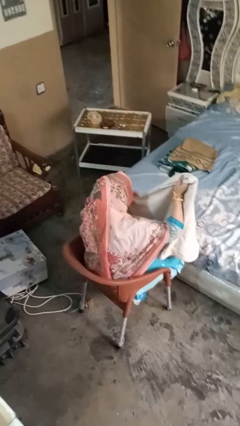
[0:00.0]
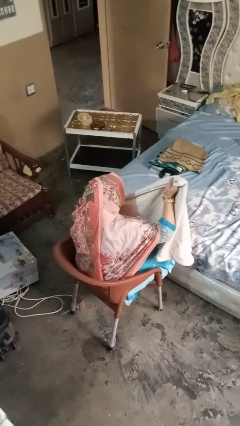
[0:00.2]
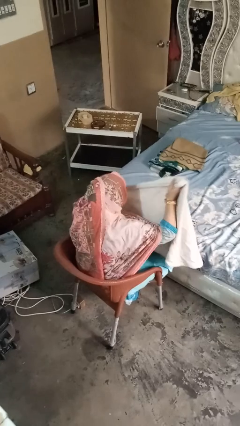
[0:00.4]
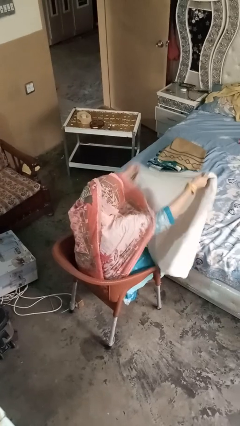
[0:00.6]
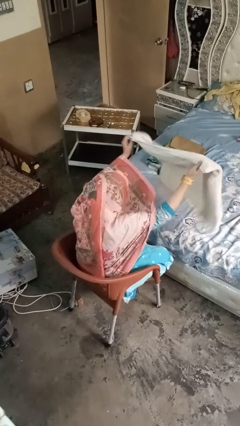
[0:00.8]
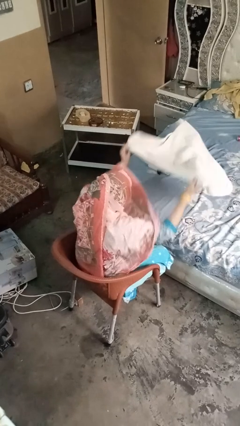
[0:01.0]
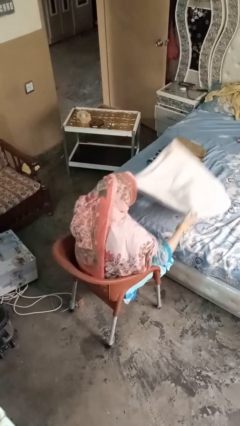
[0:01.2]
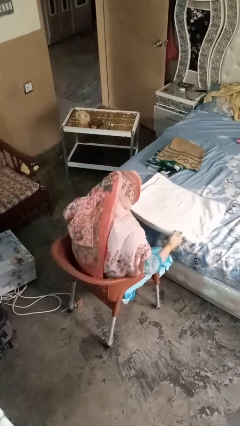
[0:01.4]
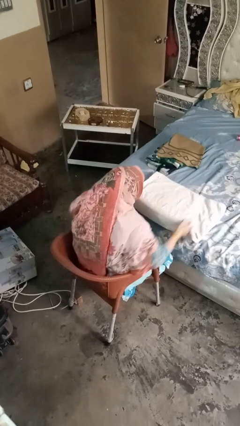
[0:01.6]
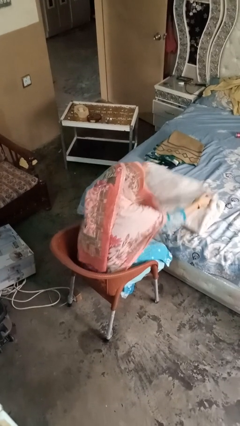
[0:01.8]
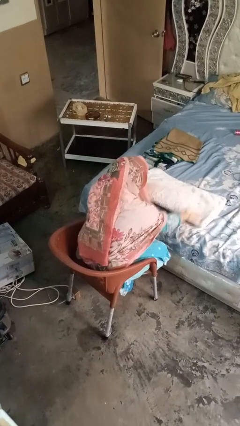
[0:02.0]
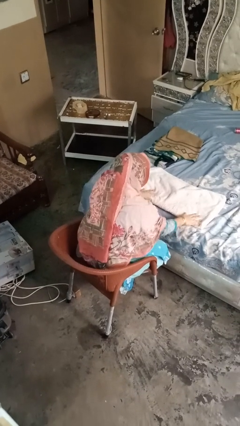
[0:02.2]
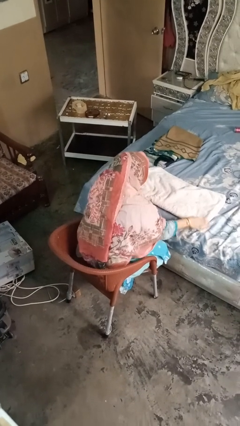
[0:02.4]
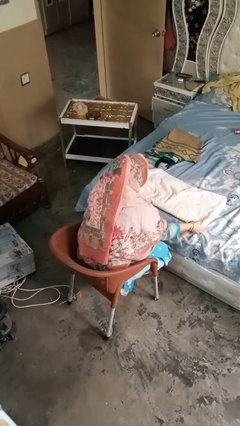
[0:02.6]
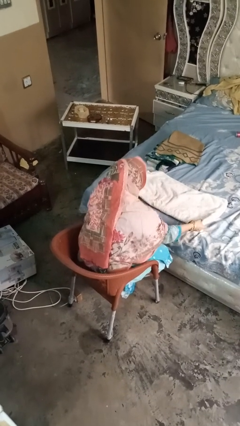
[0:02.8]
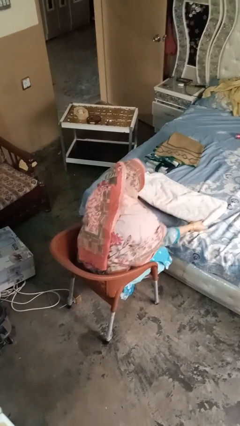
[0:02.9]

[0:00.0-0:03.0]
person folds towel

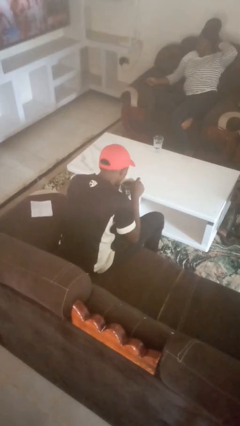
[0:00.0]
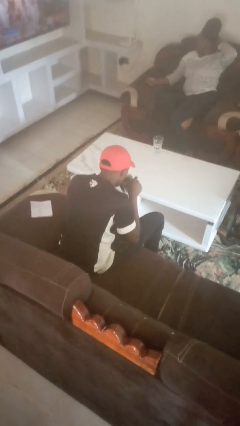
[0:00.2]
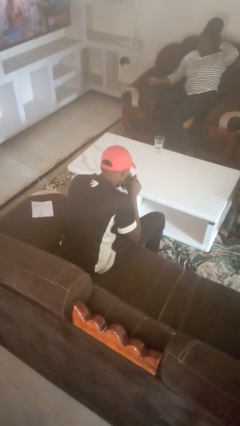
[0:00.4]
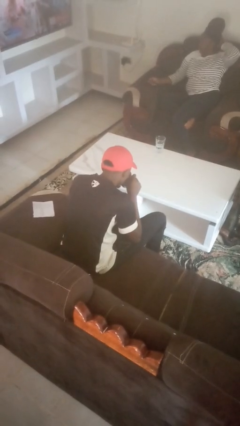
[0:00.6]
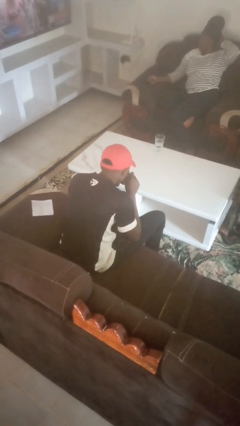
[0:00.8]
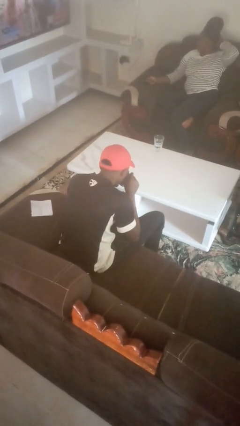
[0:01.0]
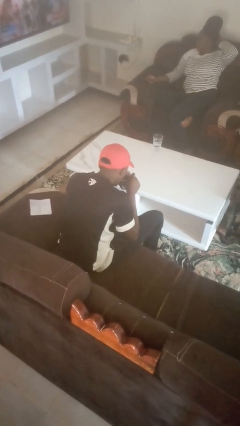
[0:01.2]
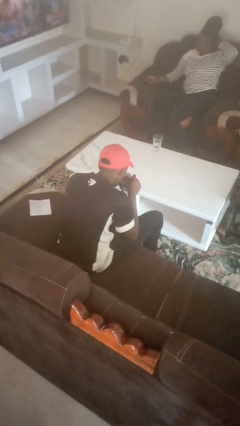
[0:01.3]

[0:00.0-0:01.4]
person drinks from mug

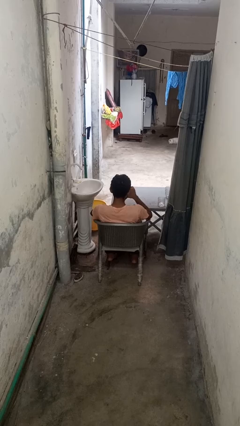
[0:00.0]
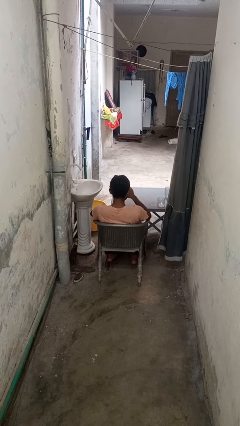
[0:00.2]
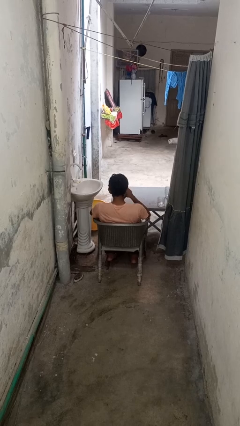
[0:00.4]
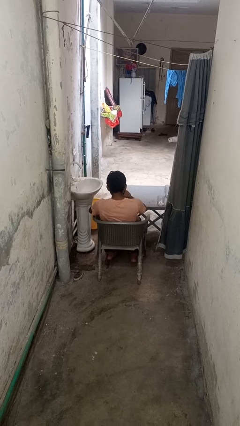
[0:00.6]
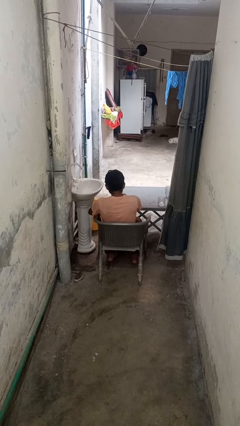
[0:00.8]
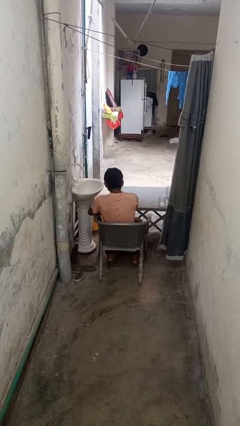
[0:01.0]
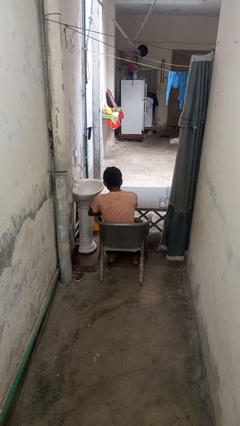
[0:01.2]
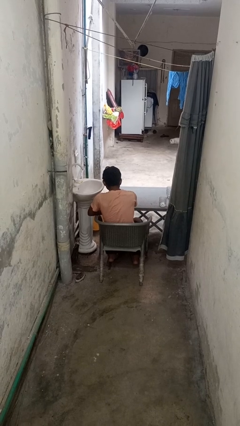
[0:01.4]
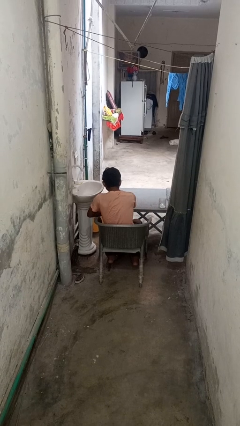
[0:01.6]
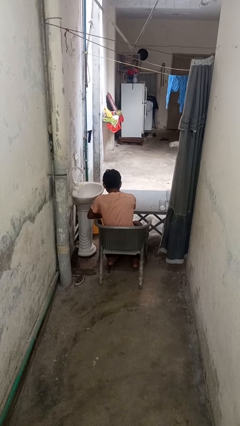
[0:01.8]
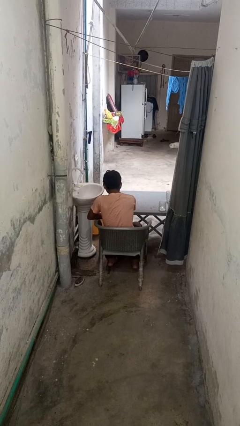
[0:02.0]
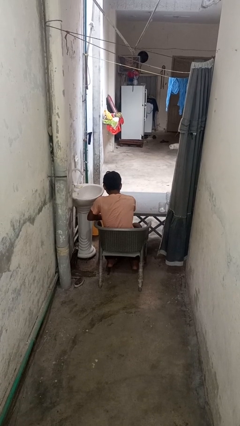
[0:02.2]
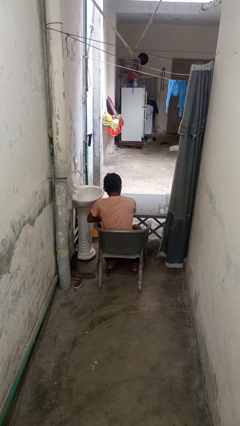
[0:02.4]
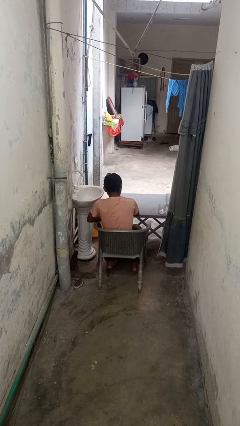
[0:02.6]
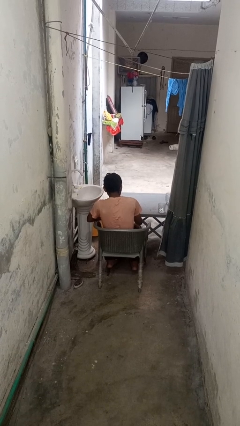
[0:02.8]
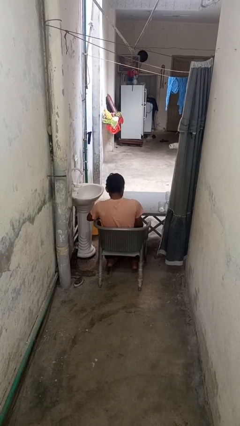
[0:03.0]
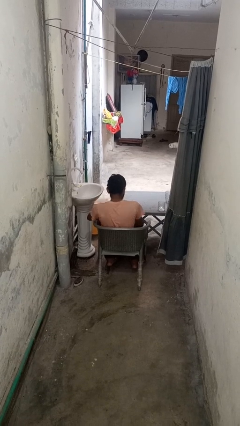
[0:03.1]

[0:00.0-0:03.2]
person puts down object on table

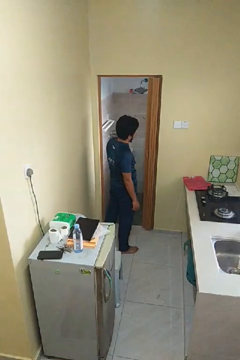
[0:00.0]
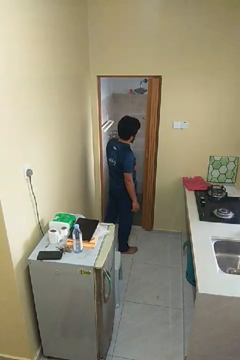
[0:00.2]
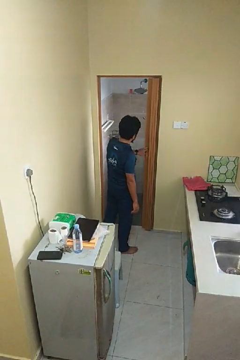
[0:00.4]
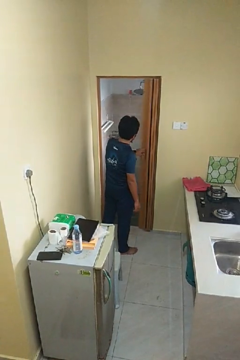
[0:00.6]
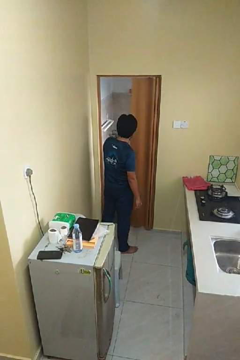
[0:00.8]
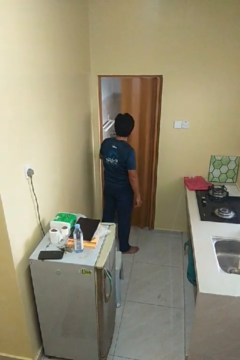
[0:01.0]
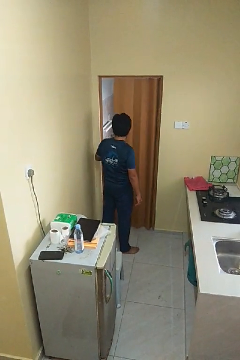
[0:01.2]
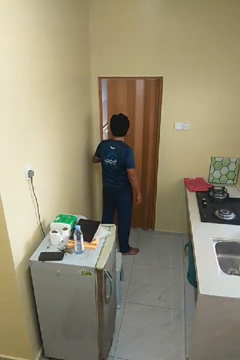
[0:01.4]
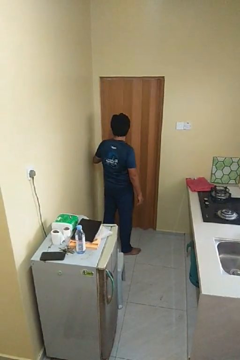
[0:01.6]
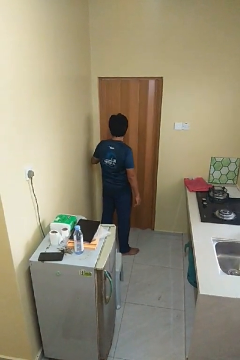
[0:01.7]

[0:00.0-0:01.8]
person closes sliding door

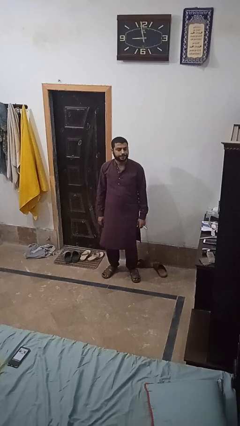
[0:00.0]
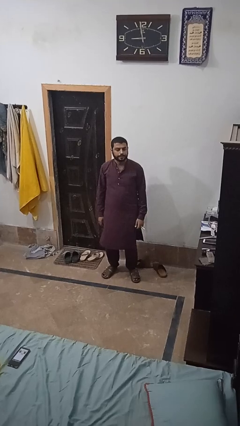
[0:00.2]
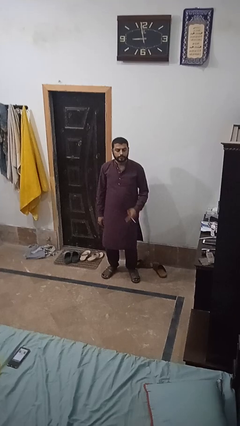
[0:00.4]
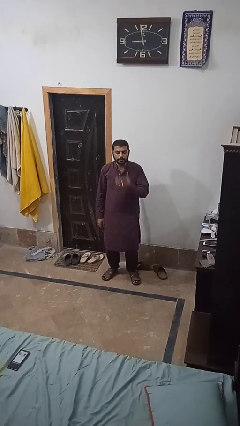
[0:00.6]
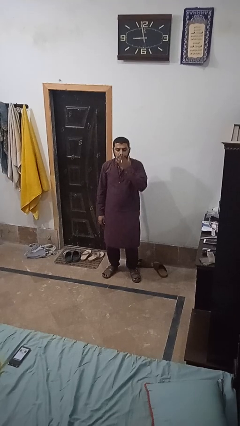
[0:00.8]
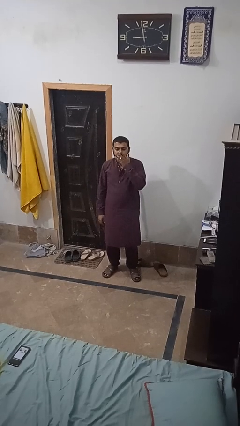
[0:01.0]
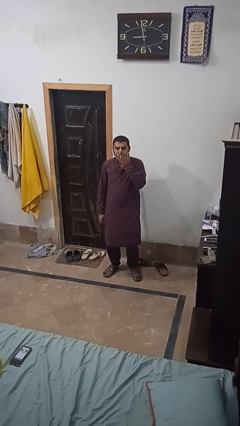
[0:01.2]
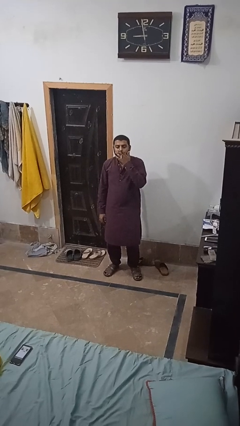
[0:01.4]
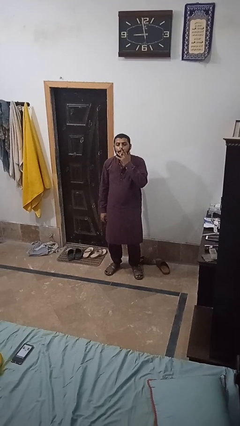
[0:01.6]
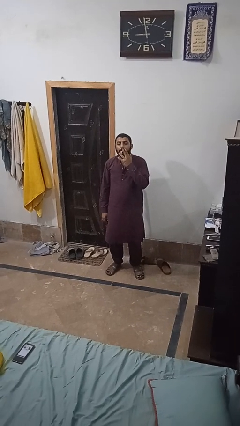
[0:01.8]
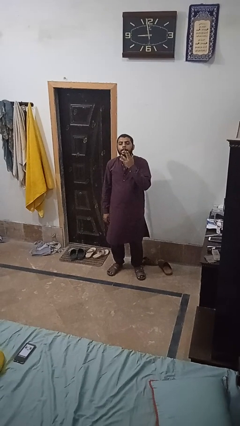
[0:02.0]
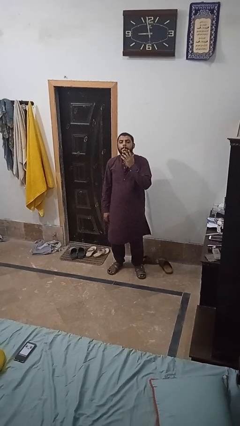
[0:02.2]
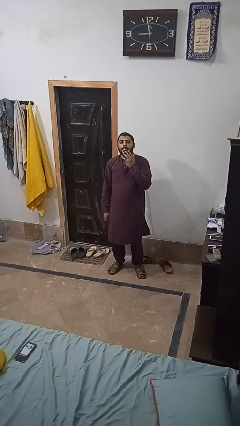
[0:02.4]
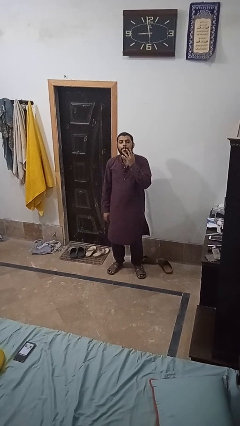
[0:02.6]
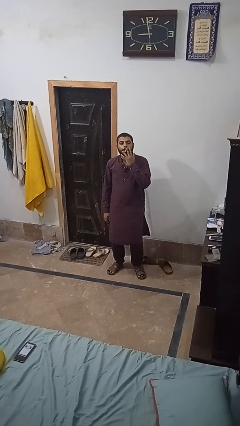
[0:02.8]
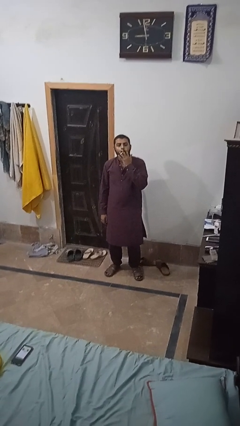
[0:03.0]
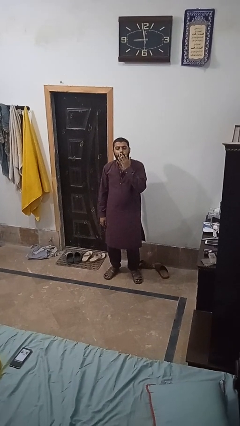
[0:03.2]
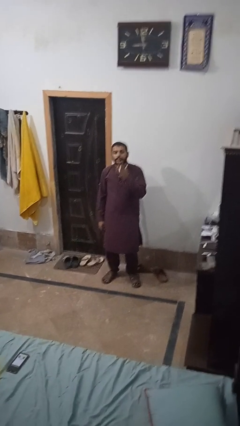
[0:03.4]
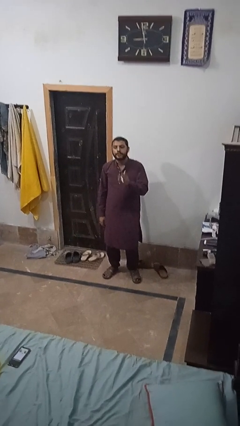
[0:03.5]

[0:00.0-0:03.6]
person vapes

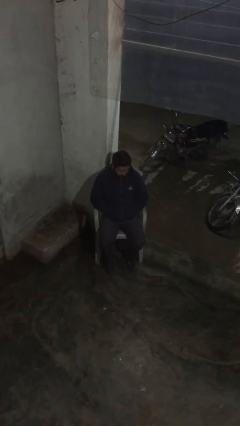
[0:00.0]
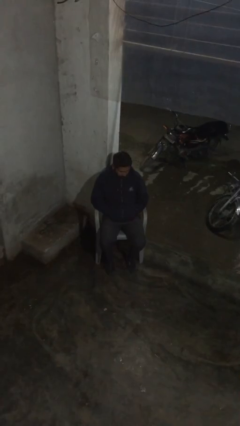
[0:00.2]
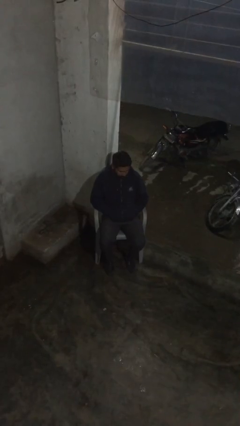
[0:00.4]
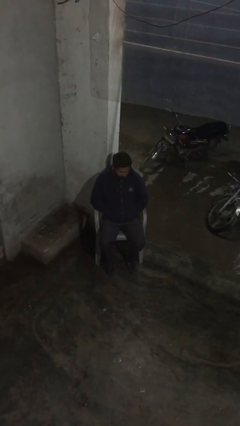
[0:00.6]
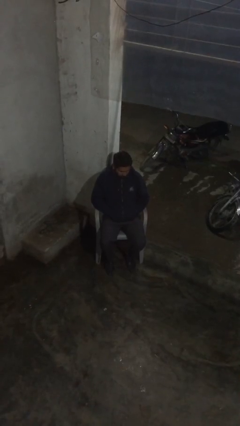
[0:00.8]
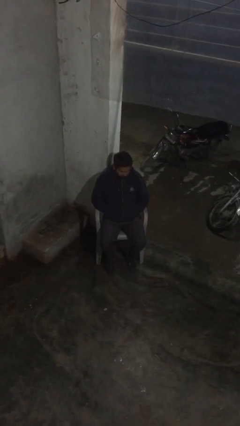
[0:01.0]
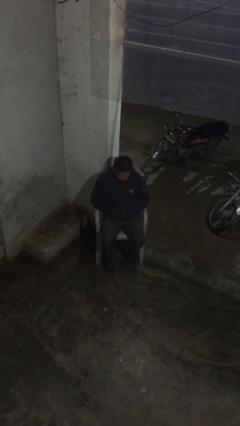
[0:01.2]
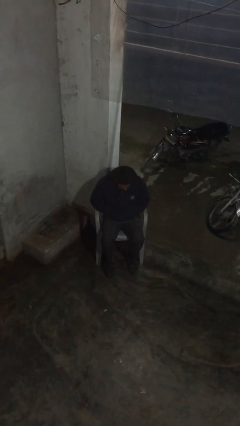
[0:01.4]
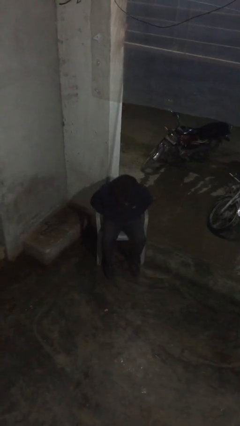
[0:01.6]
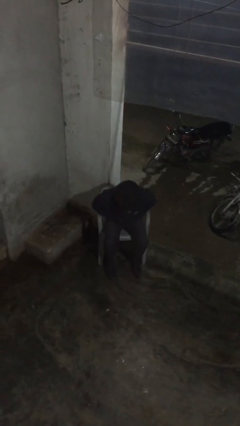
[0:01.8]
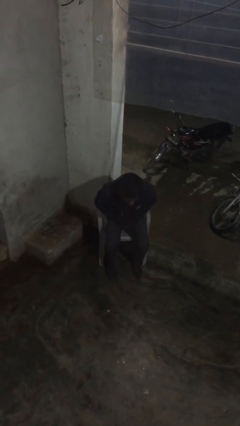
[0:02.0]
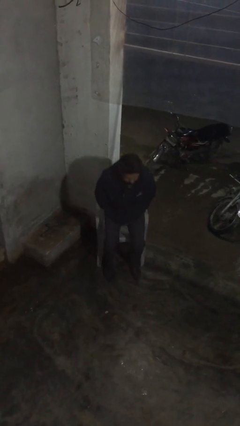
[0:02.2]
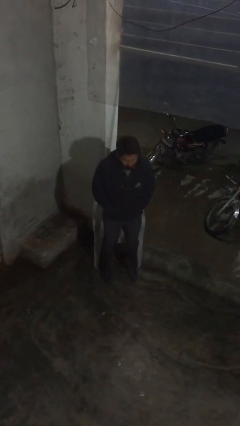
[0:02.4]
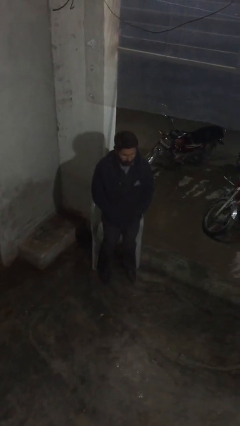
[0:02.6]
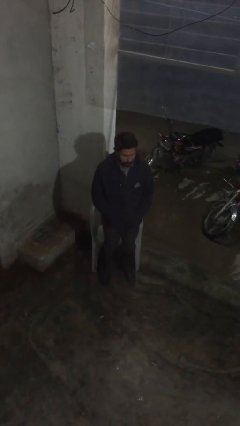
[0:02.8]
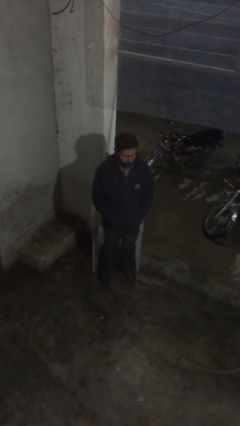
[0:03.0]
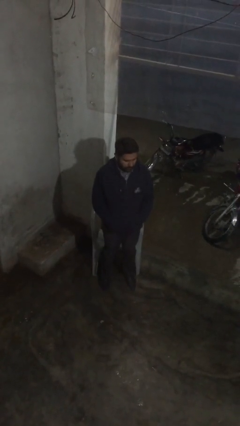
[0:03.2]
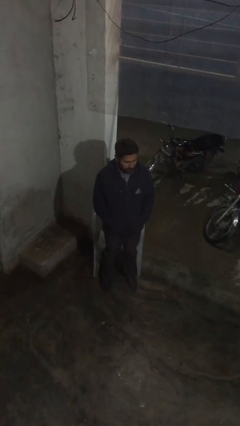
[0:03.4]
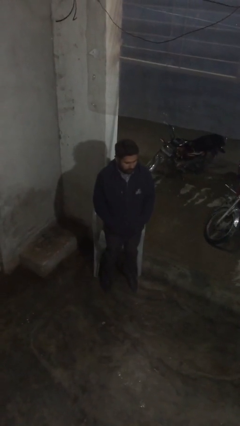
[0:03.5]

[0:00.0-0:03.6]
person stands up

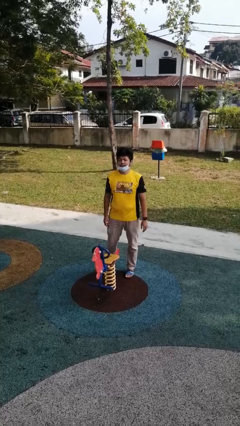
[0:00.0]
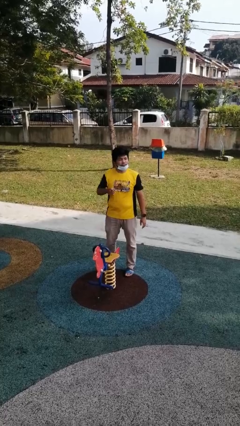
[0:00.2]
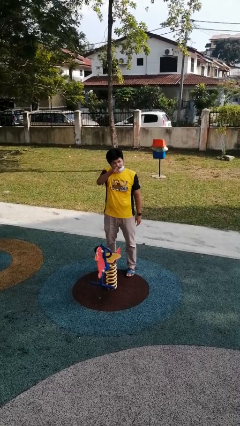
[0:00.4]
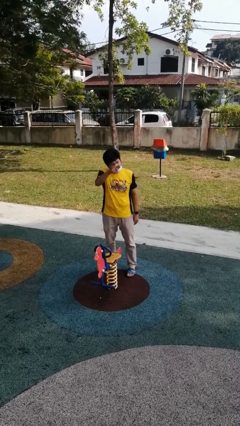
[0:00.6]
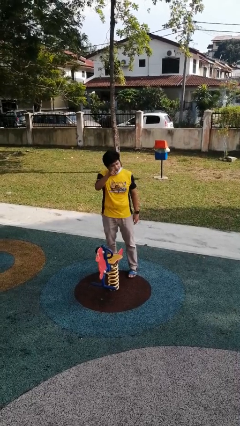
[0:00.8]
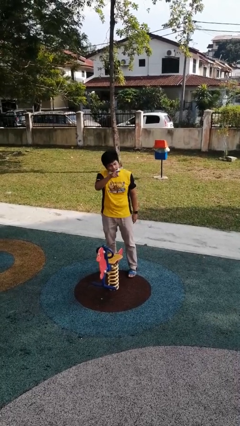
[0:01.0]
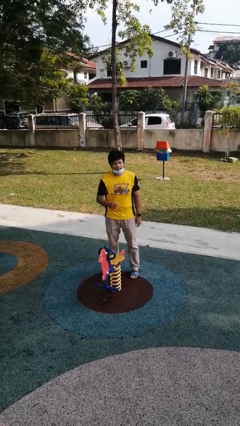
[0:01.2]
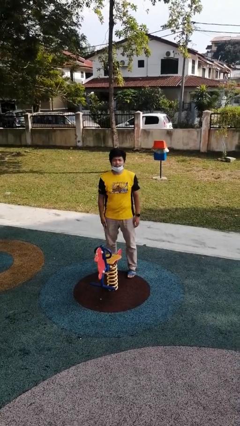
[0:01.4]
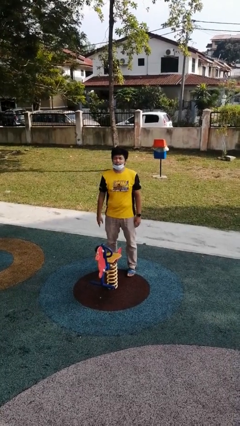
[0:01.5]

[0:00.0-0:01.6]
person points at person
